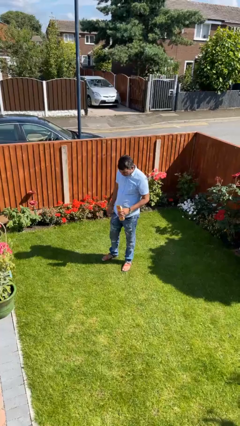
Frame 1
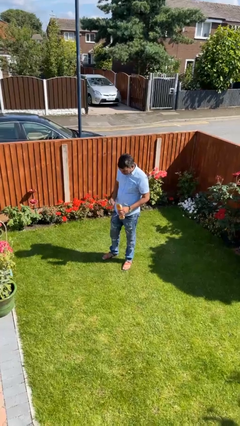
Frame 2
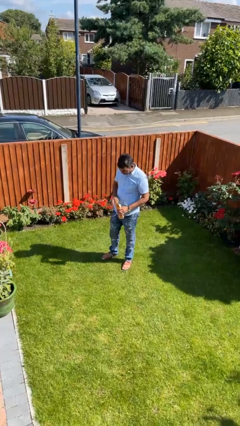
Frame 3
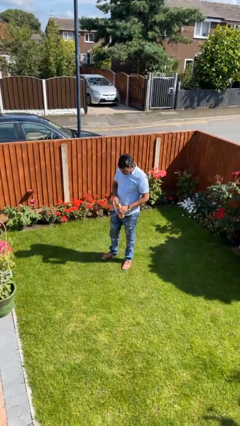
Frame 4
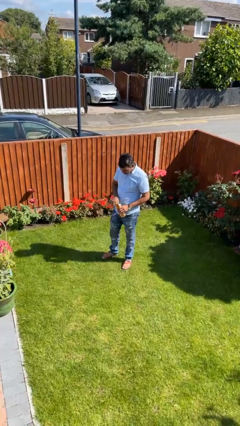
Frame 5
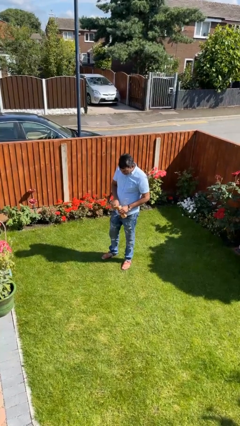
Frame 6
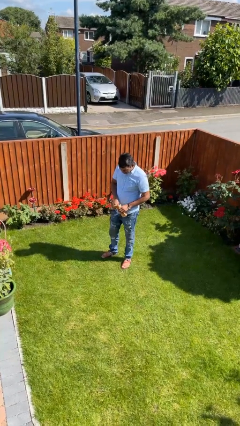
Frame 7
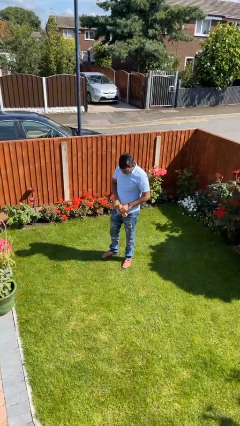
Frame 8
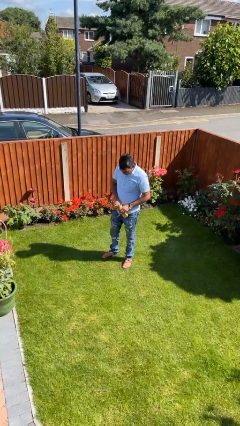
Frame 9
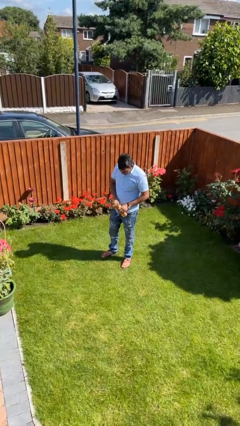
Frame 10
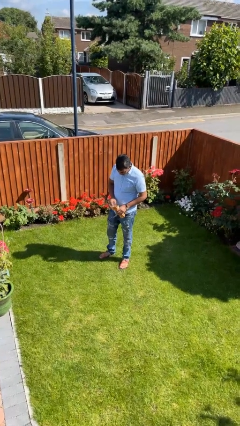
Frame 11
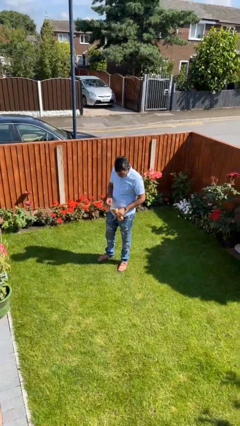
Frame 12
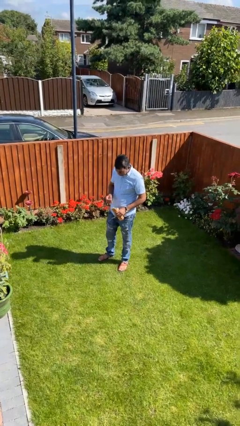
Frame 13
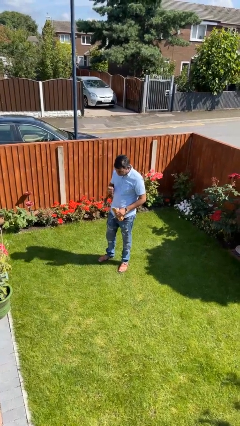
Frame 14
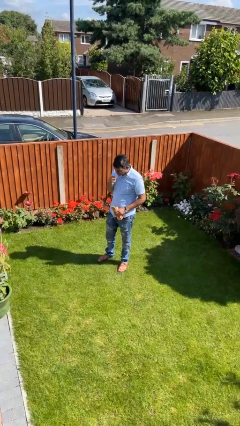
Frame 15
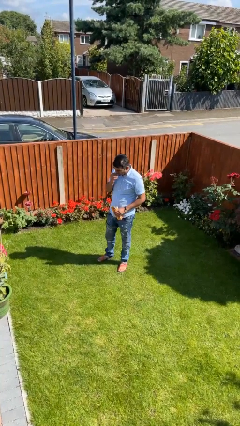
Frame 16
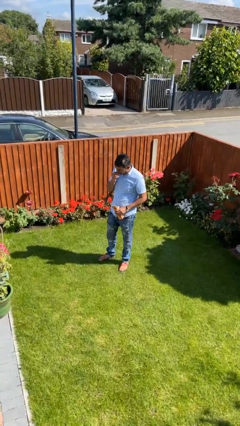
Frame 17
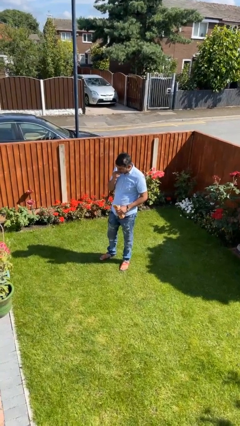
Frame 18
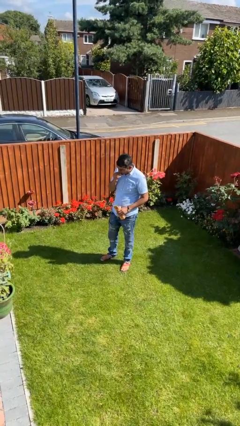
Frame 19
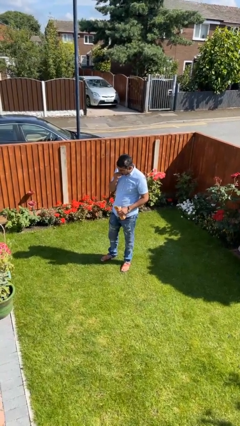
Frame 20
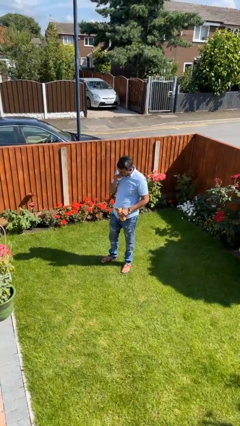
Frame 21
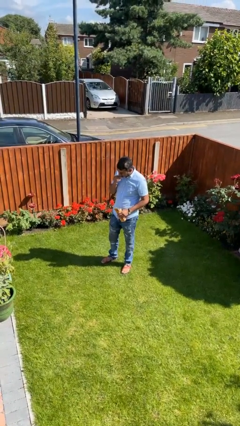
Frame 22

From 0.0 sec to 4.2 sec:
person eats snack from bag

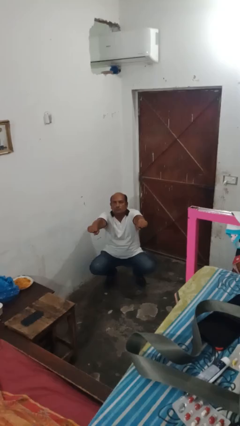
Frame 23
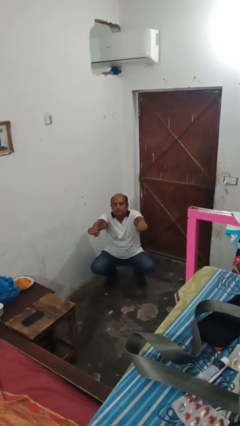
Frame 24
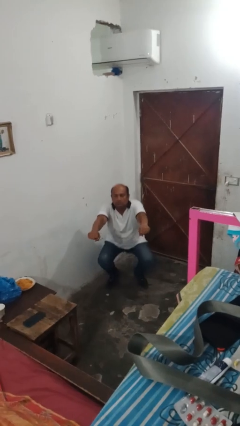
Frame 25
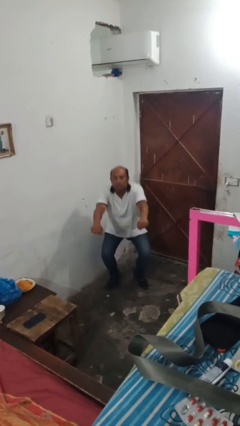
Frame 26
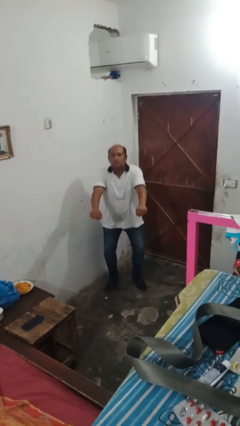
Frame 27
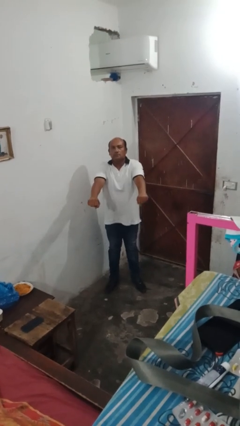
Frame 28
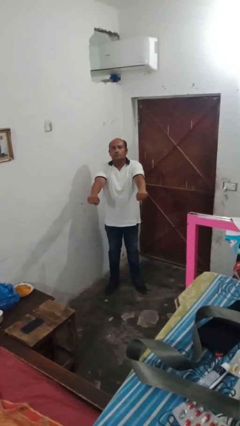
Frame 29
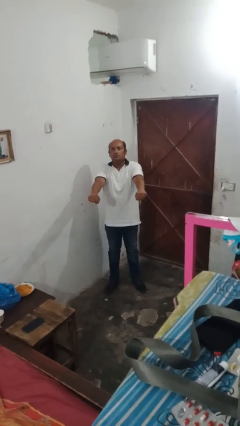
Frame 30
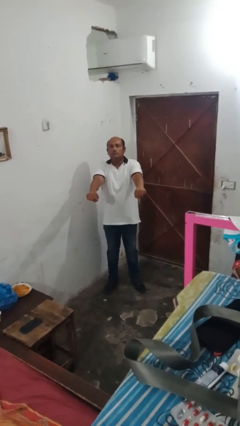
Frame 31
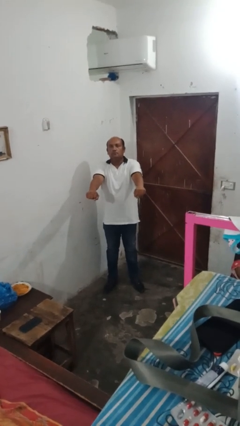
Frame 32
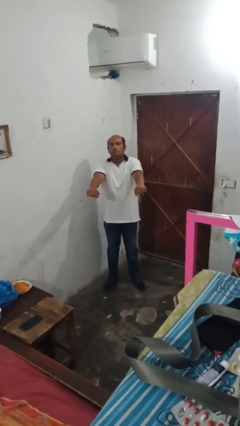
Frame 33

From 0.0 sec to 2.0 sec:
person stands up

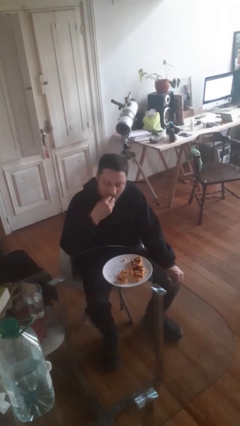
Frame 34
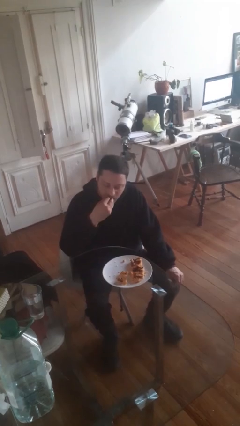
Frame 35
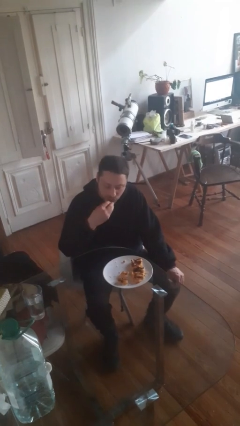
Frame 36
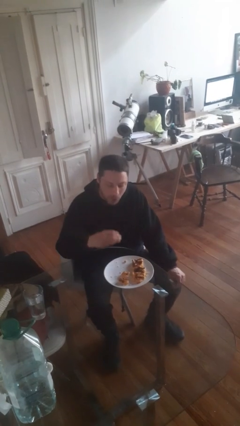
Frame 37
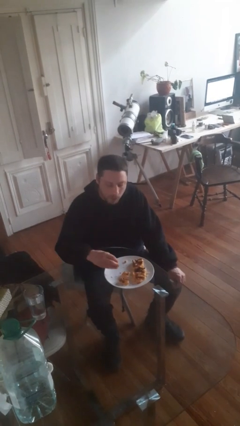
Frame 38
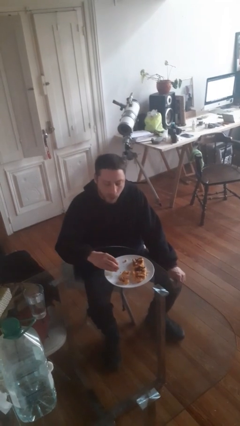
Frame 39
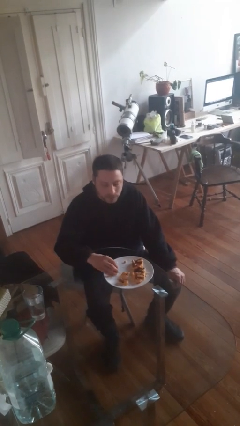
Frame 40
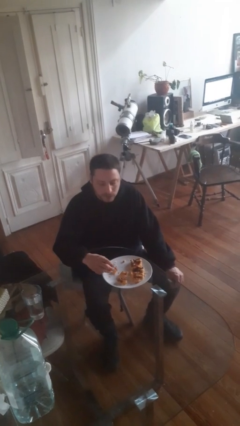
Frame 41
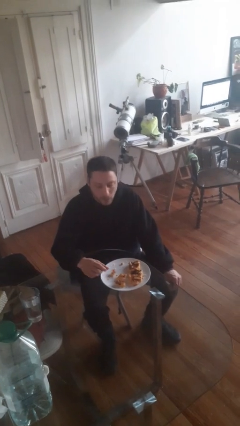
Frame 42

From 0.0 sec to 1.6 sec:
person eats with hands

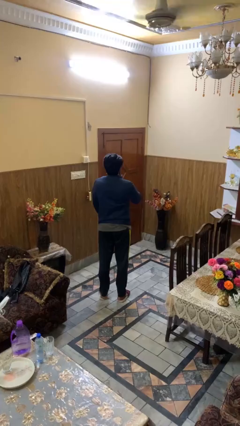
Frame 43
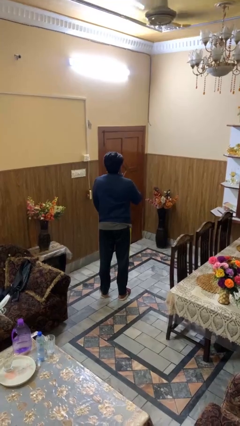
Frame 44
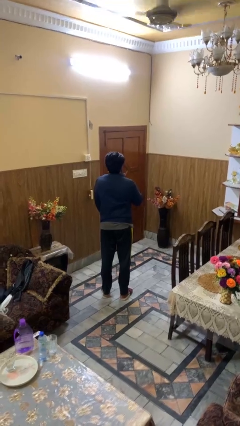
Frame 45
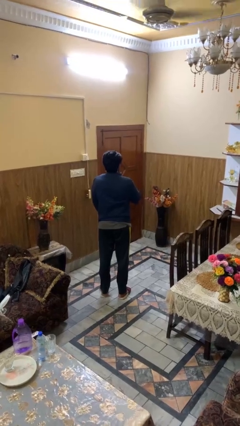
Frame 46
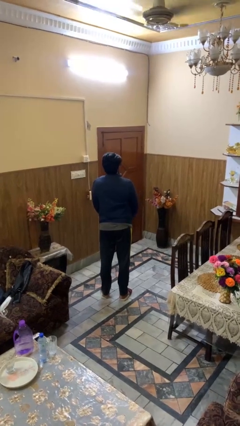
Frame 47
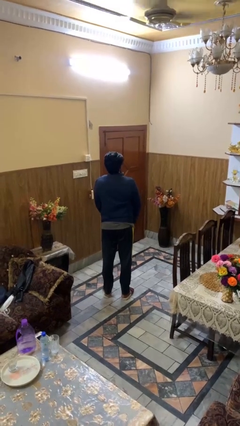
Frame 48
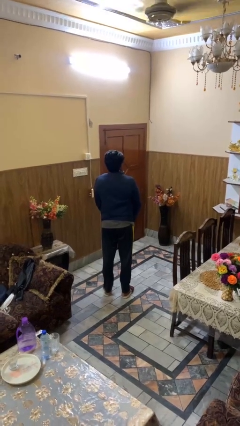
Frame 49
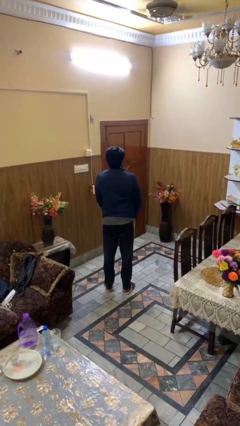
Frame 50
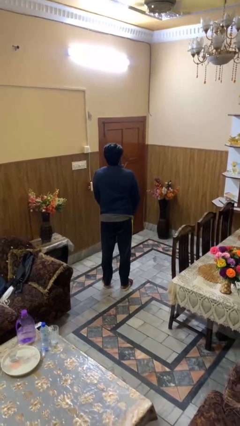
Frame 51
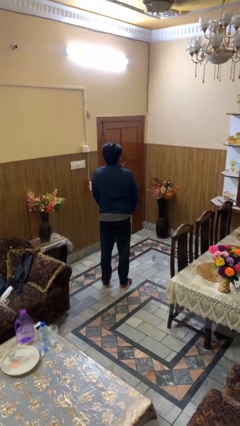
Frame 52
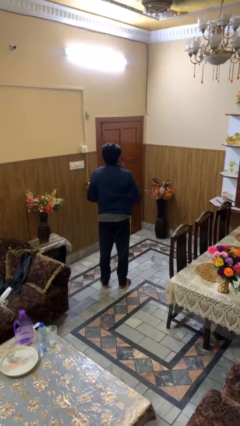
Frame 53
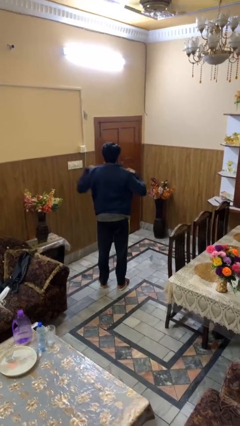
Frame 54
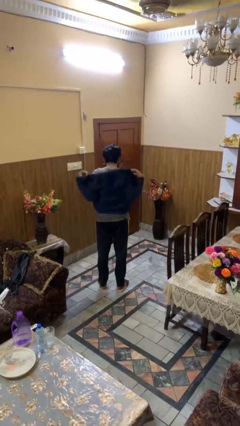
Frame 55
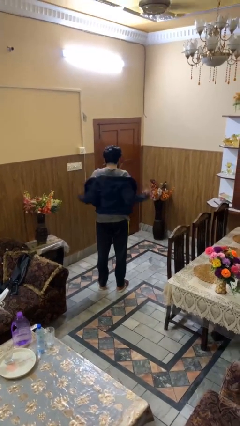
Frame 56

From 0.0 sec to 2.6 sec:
person unzips jacket

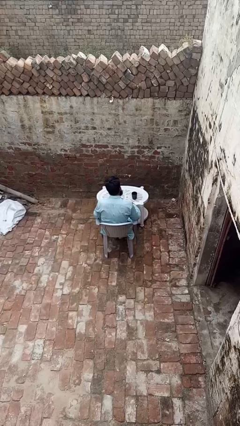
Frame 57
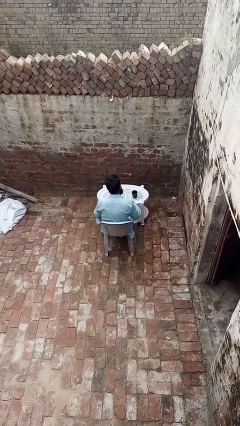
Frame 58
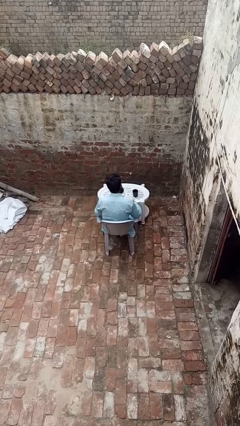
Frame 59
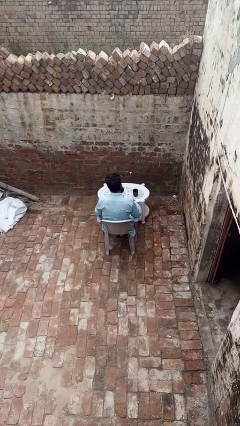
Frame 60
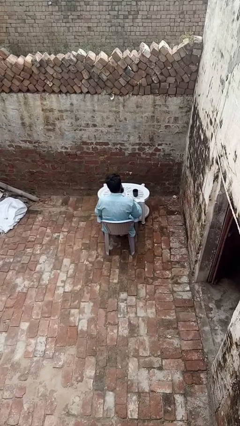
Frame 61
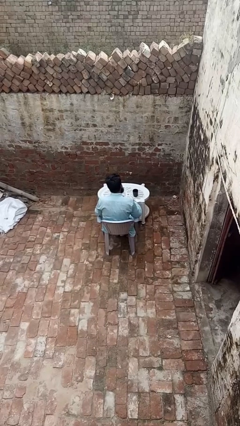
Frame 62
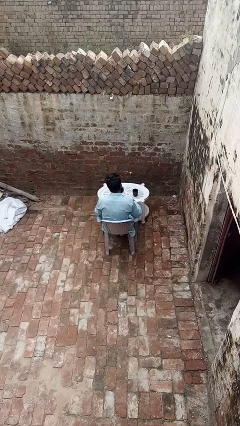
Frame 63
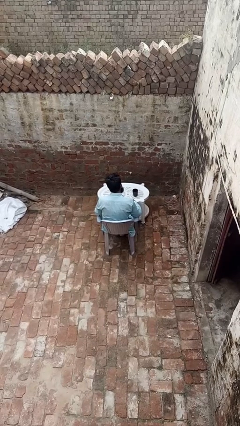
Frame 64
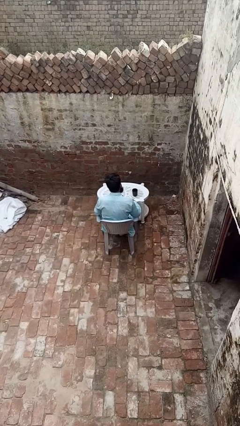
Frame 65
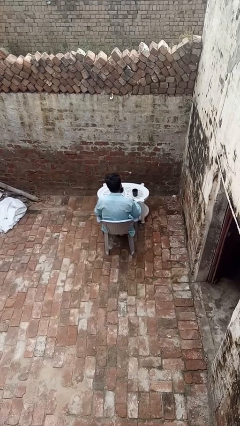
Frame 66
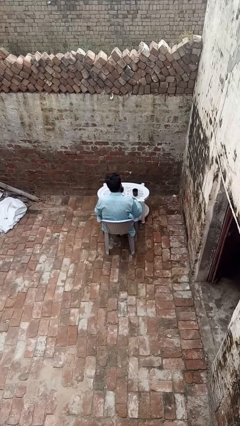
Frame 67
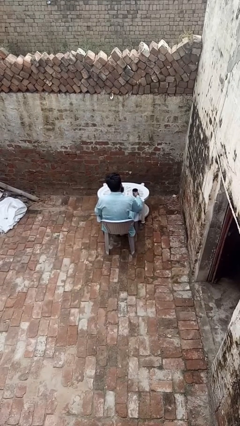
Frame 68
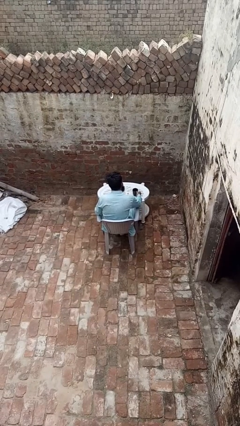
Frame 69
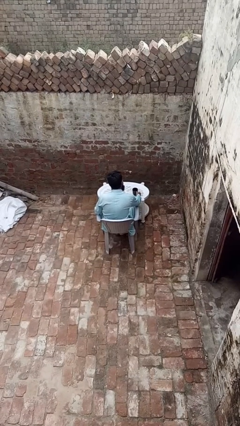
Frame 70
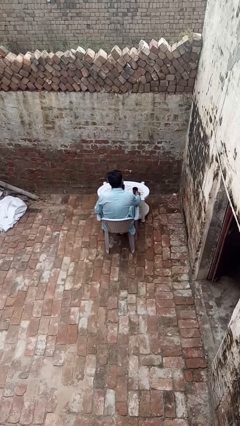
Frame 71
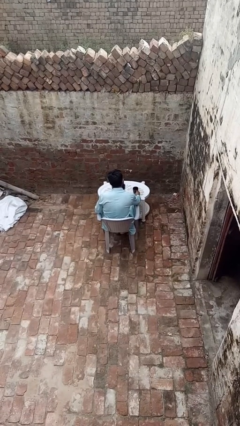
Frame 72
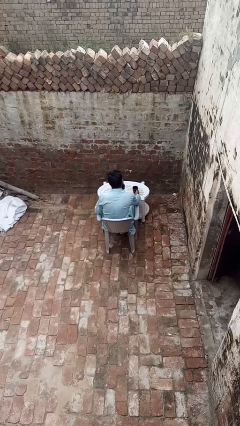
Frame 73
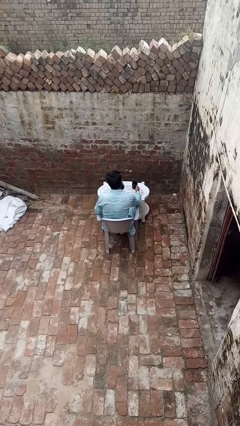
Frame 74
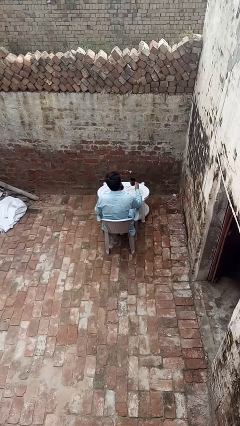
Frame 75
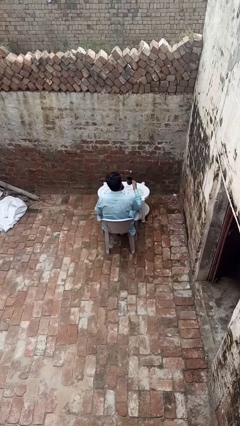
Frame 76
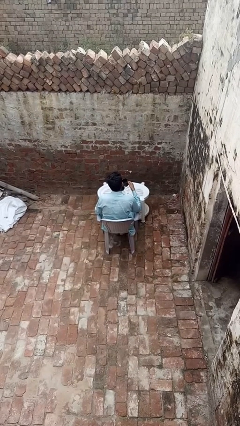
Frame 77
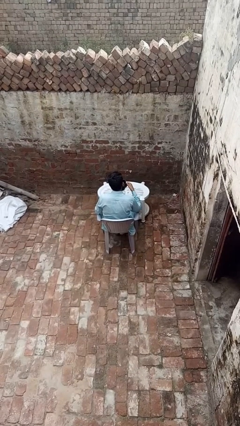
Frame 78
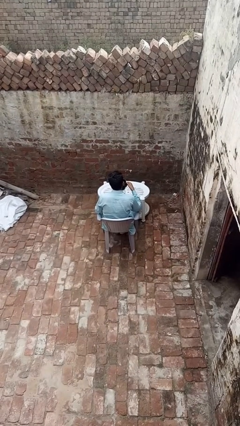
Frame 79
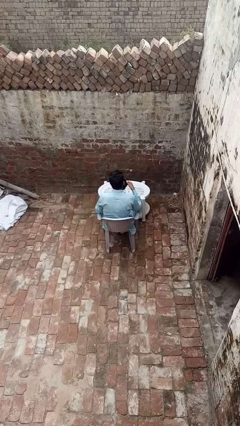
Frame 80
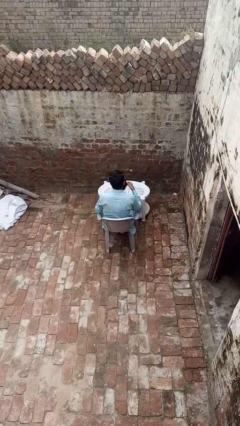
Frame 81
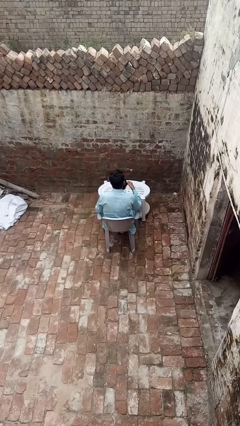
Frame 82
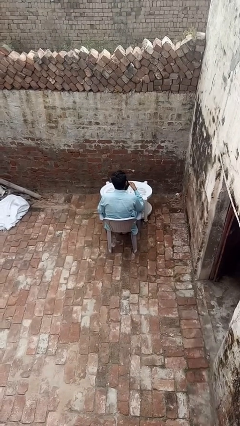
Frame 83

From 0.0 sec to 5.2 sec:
person picks up object from table

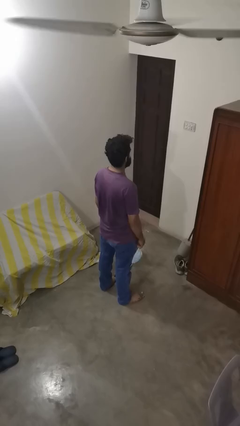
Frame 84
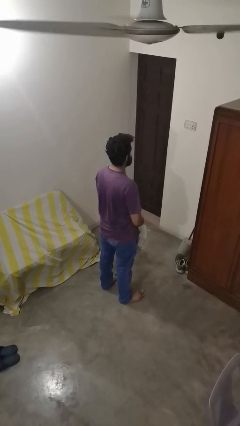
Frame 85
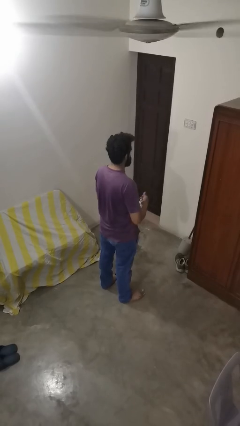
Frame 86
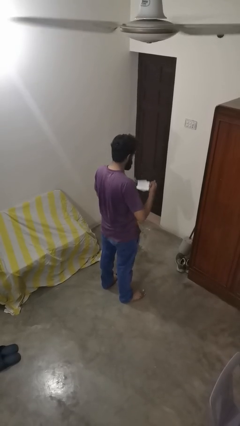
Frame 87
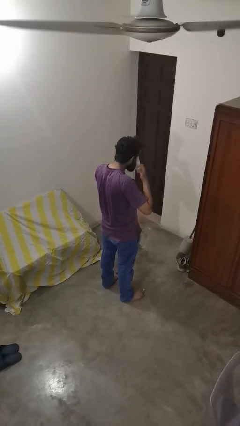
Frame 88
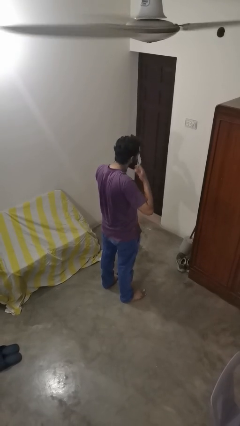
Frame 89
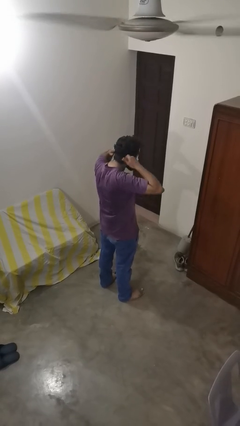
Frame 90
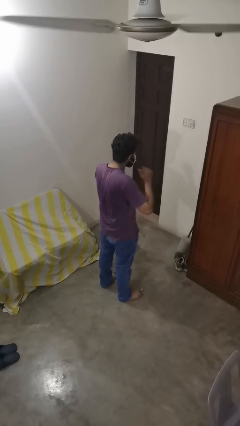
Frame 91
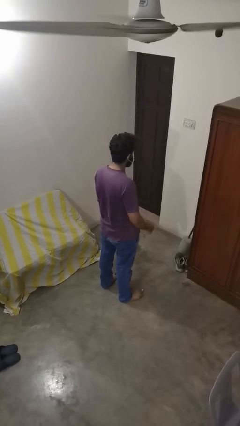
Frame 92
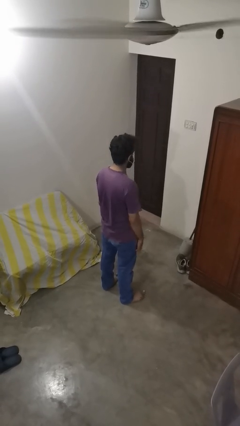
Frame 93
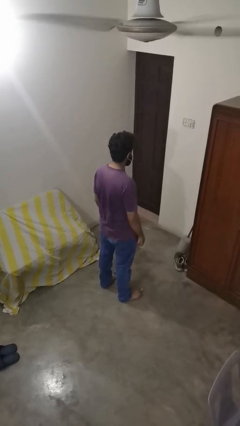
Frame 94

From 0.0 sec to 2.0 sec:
person puts on facemask
